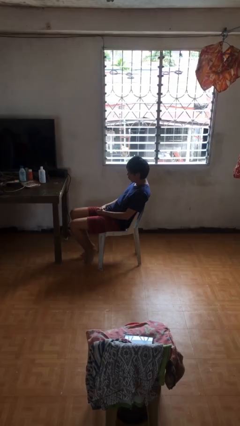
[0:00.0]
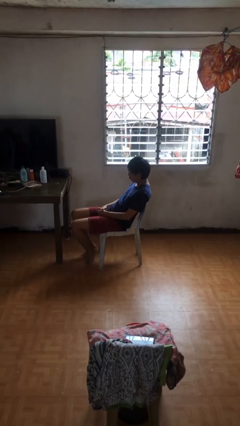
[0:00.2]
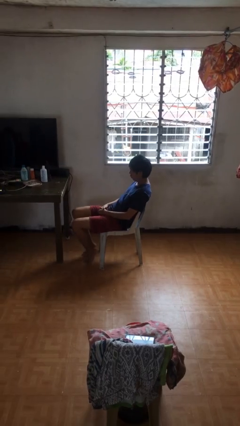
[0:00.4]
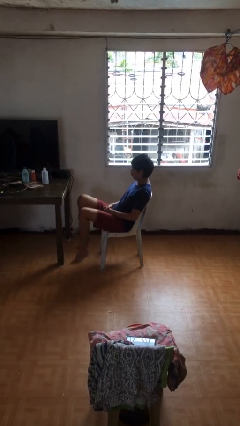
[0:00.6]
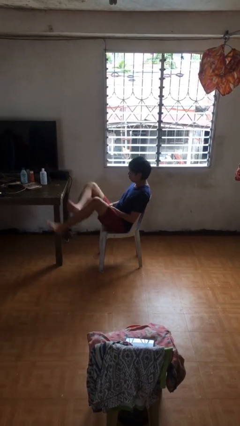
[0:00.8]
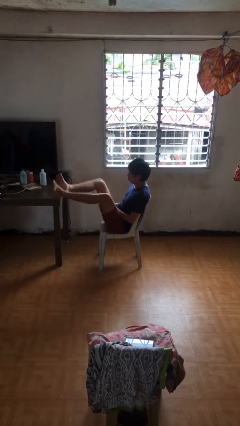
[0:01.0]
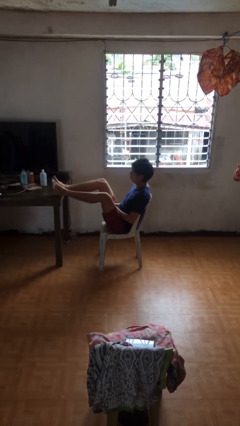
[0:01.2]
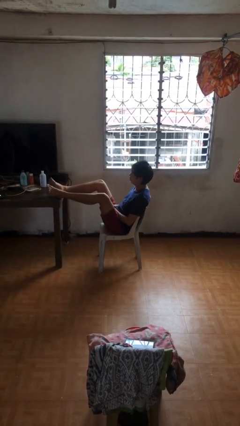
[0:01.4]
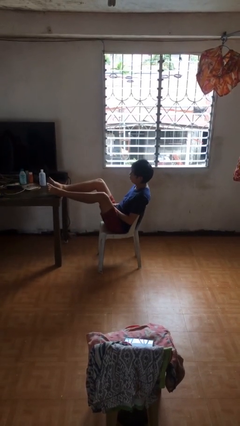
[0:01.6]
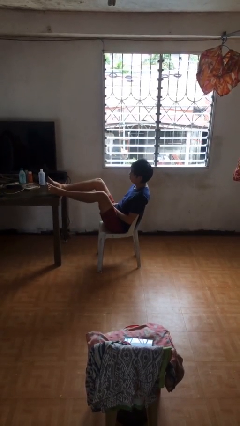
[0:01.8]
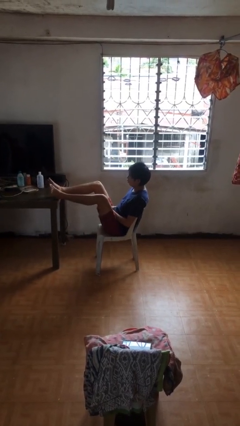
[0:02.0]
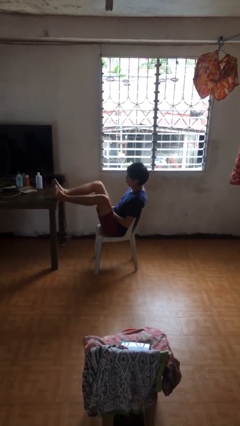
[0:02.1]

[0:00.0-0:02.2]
person puts feet up

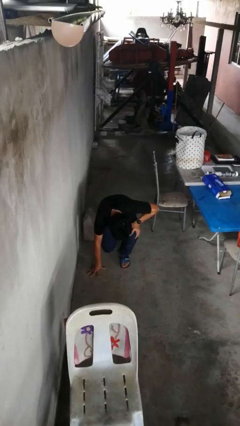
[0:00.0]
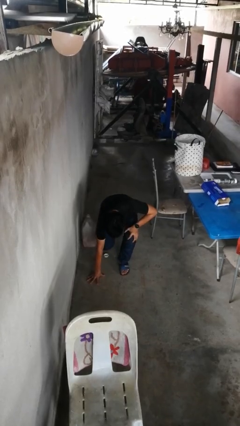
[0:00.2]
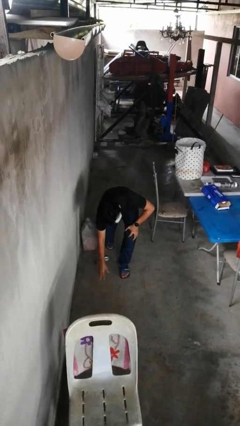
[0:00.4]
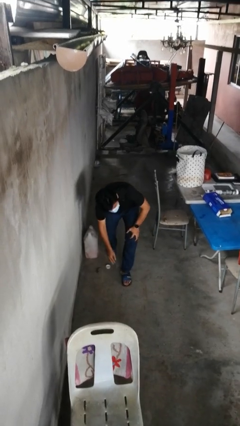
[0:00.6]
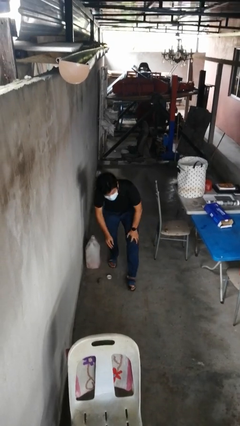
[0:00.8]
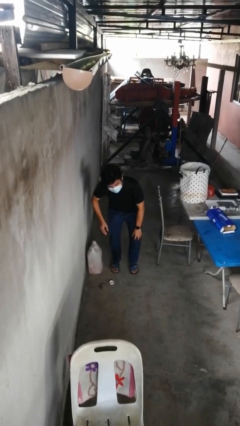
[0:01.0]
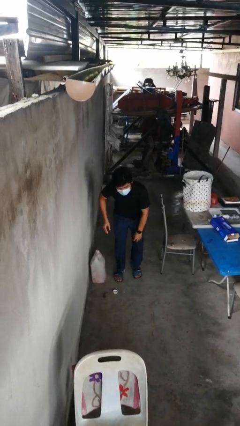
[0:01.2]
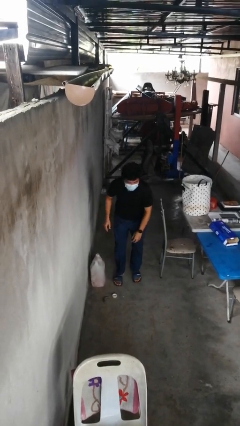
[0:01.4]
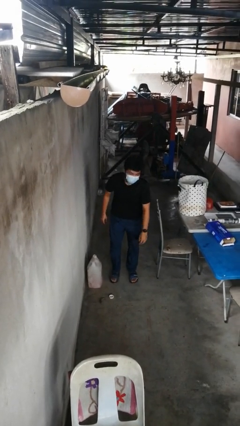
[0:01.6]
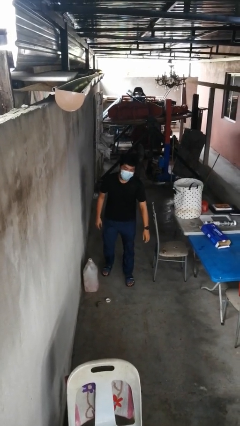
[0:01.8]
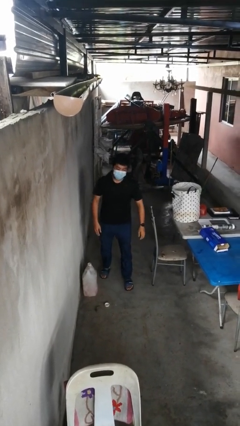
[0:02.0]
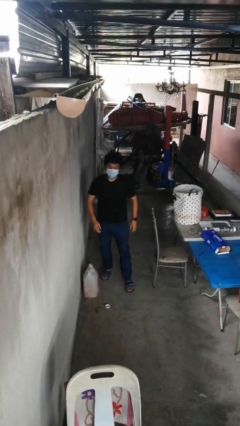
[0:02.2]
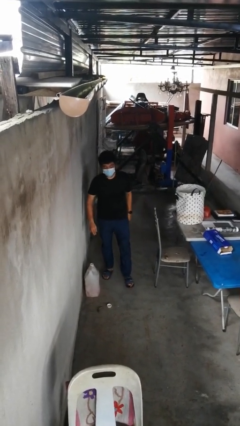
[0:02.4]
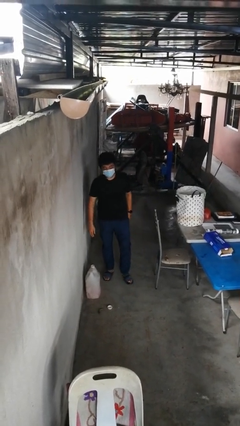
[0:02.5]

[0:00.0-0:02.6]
person stands up from floor

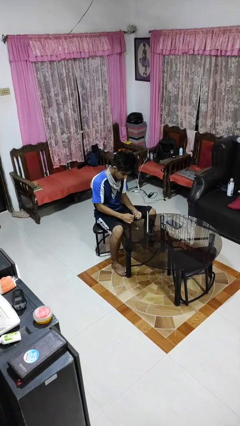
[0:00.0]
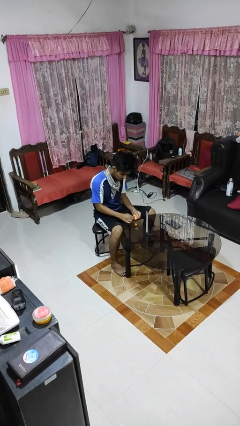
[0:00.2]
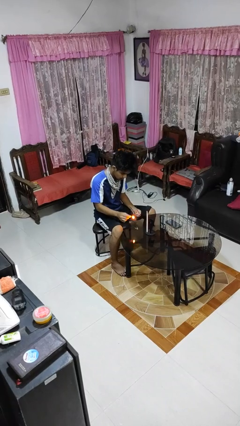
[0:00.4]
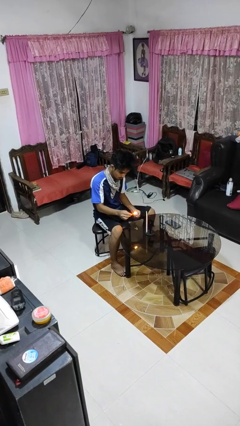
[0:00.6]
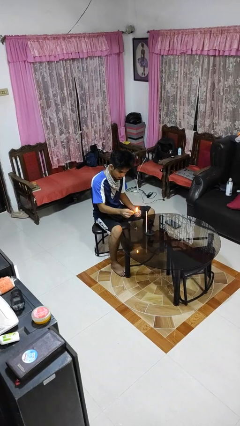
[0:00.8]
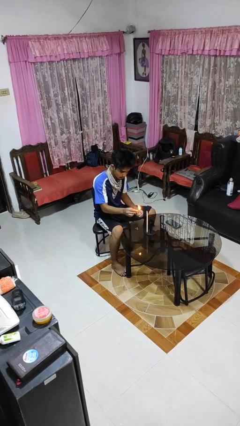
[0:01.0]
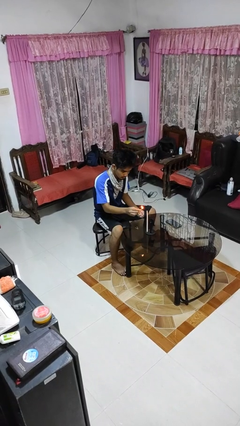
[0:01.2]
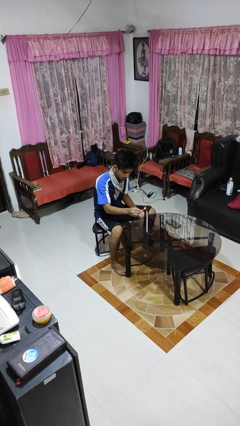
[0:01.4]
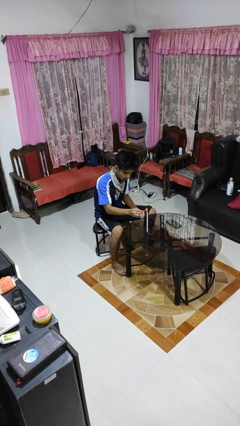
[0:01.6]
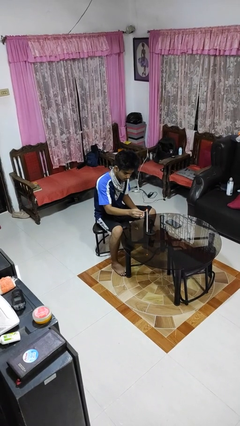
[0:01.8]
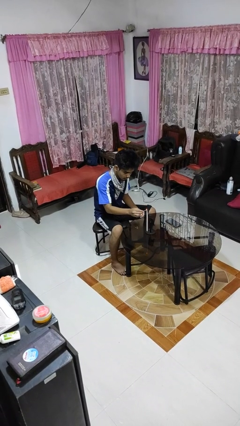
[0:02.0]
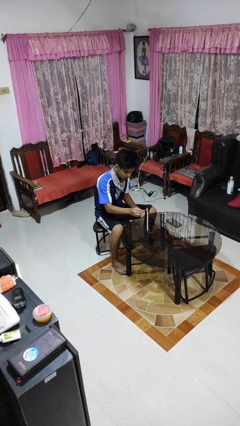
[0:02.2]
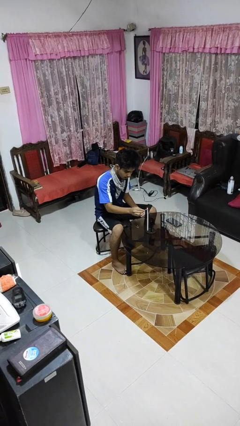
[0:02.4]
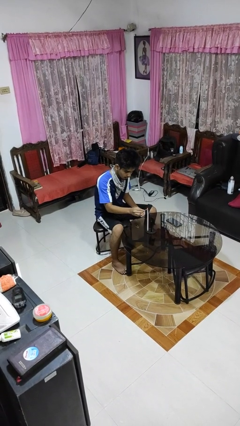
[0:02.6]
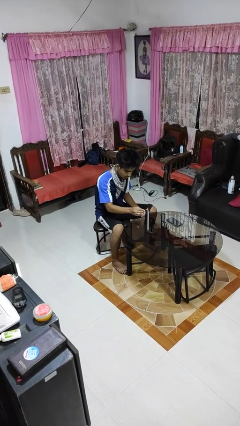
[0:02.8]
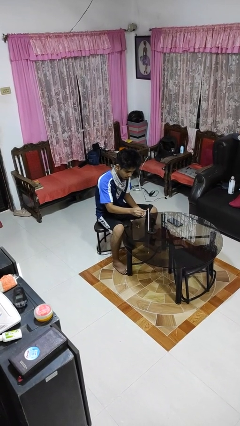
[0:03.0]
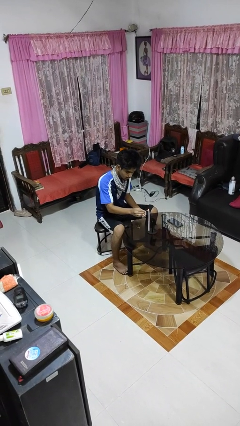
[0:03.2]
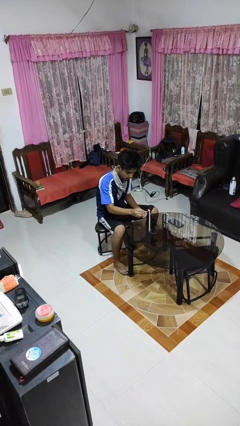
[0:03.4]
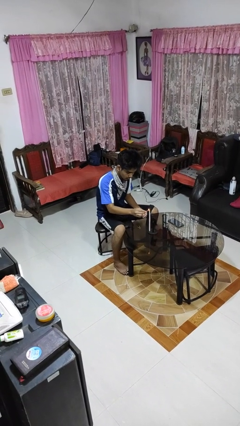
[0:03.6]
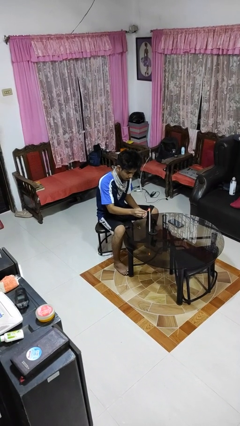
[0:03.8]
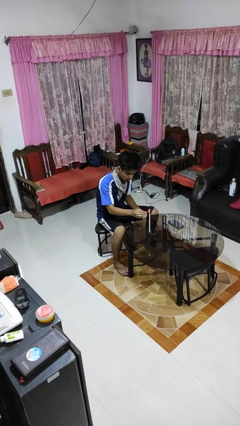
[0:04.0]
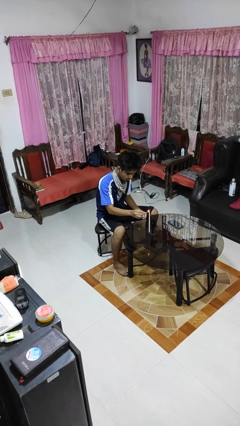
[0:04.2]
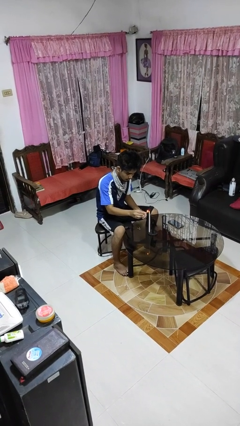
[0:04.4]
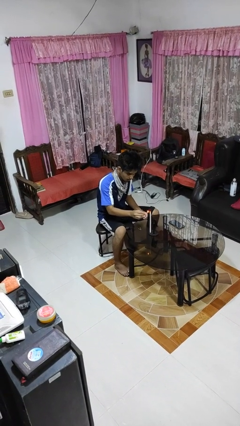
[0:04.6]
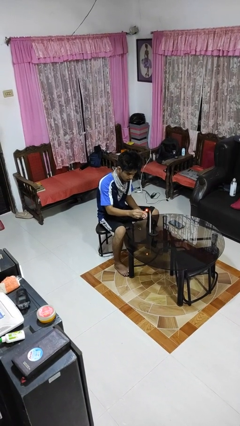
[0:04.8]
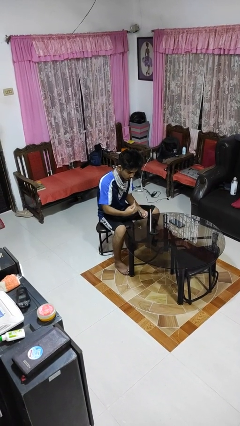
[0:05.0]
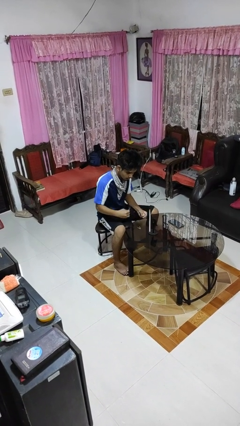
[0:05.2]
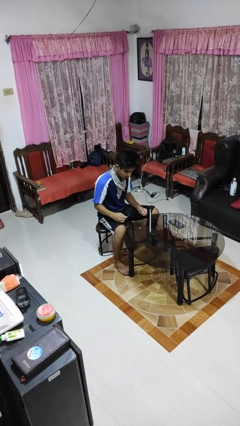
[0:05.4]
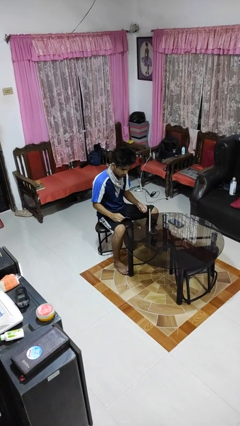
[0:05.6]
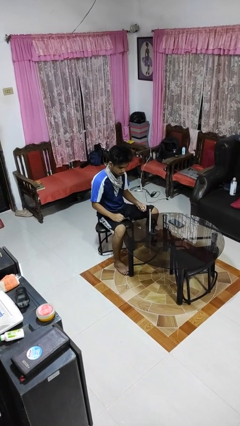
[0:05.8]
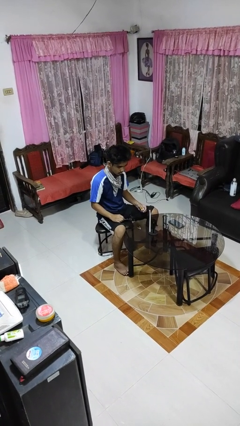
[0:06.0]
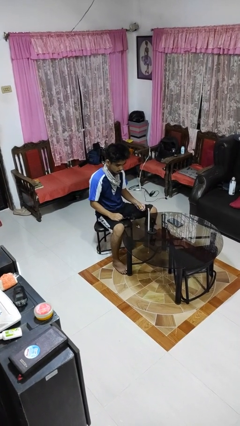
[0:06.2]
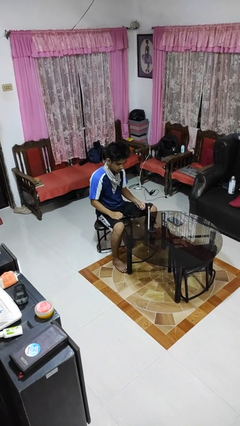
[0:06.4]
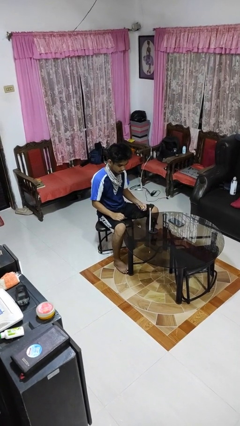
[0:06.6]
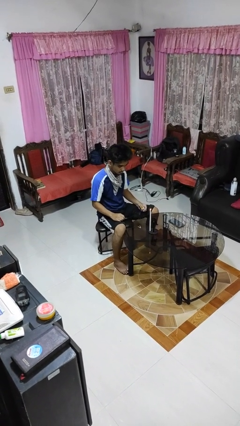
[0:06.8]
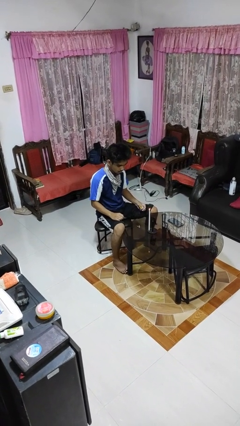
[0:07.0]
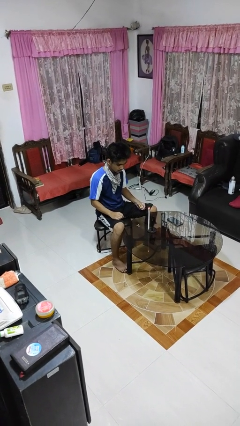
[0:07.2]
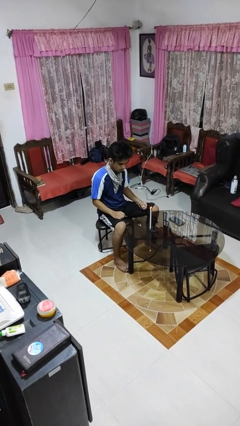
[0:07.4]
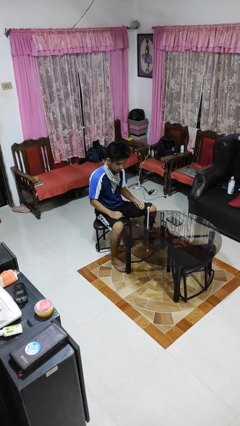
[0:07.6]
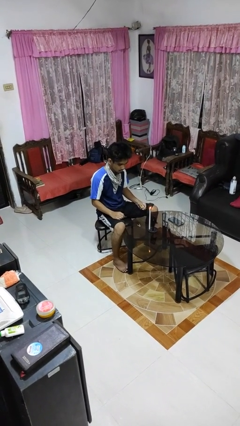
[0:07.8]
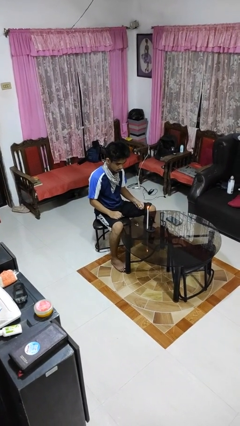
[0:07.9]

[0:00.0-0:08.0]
person lights candle

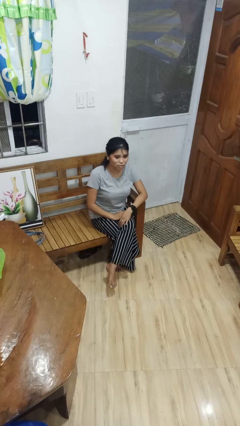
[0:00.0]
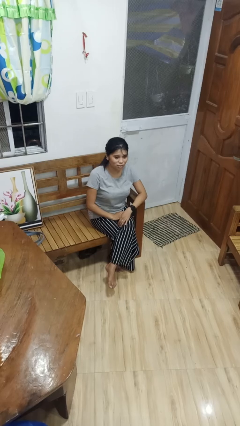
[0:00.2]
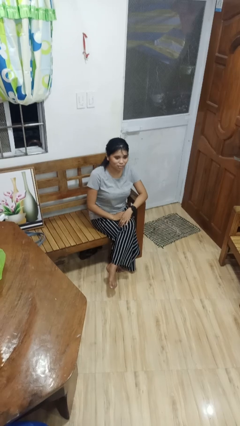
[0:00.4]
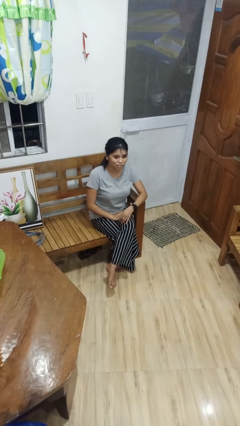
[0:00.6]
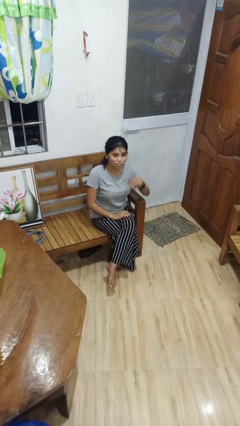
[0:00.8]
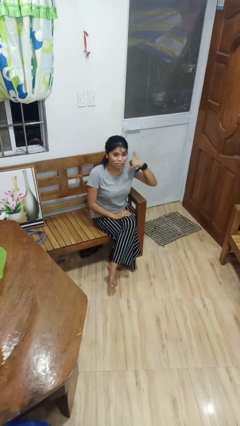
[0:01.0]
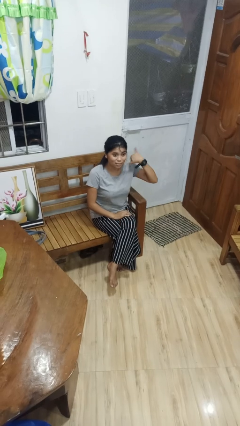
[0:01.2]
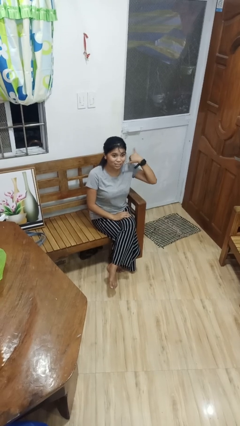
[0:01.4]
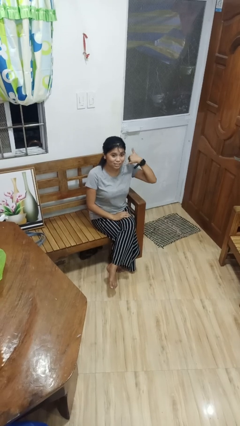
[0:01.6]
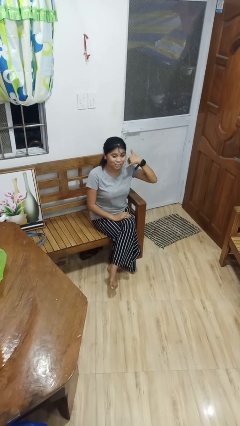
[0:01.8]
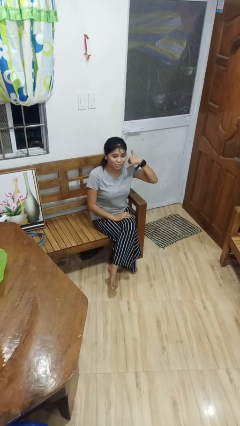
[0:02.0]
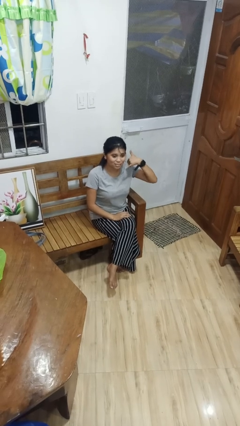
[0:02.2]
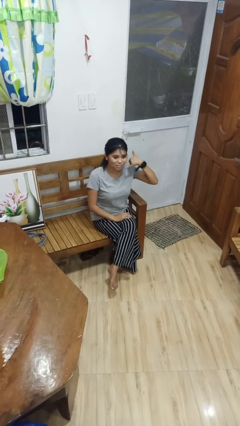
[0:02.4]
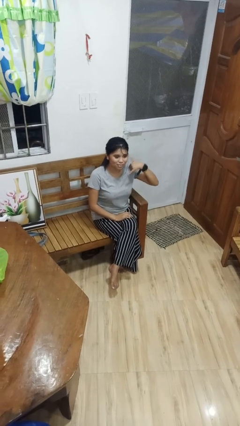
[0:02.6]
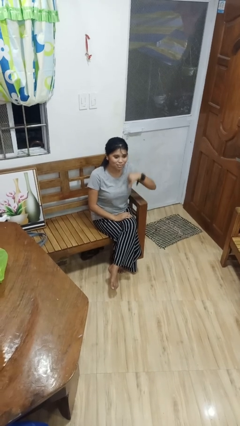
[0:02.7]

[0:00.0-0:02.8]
person gestures call me

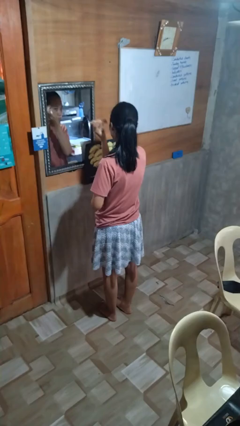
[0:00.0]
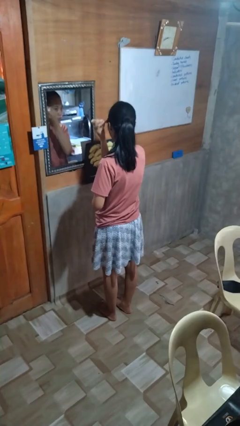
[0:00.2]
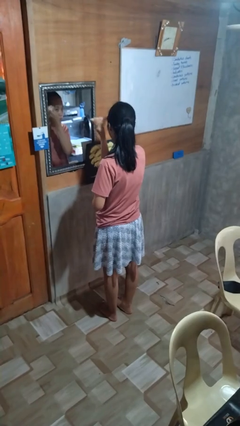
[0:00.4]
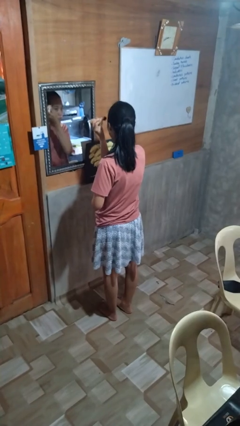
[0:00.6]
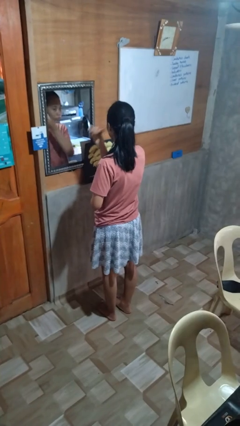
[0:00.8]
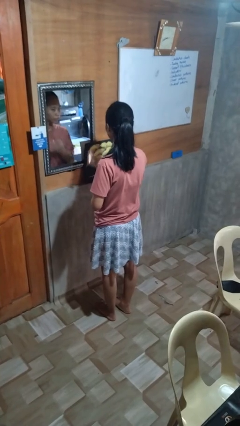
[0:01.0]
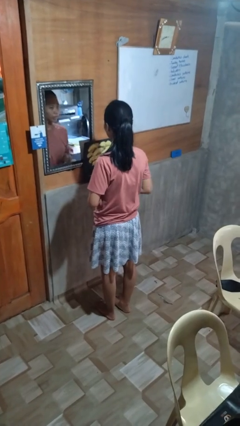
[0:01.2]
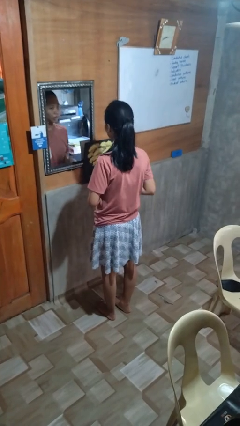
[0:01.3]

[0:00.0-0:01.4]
person applies foundation makeup

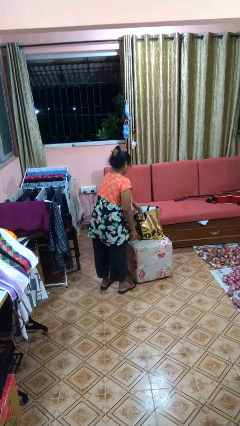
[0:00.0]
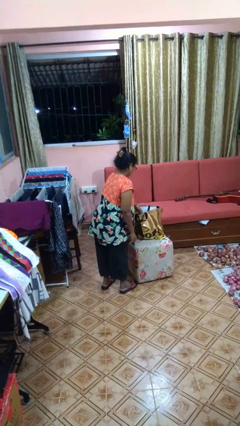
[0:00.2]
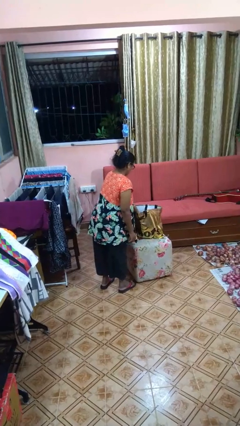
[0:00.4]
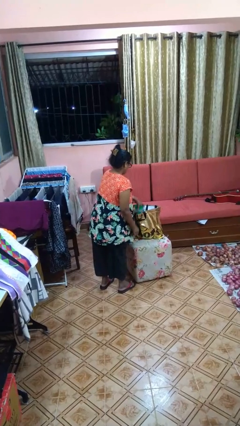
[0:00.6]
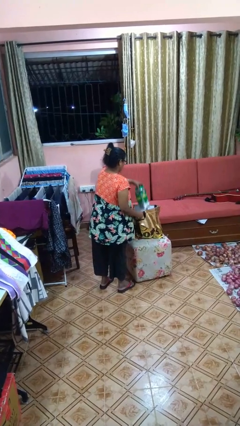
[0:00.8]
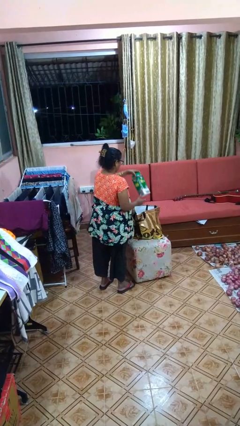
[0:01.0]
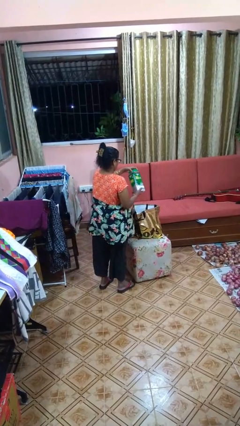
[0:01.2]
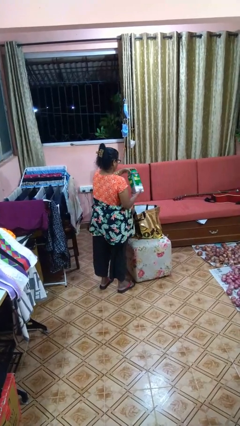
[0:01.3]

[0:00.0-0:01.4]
person takes object from bag
